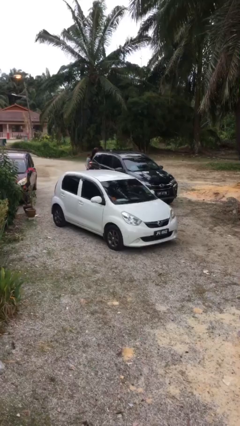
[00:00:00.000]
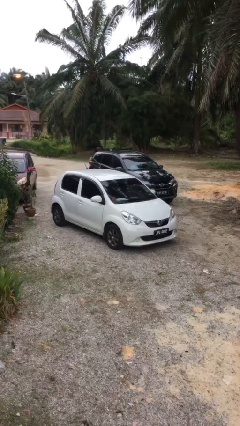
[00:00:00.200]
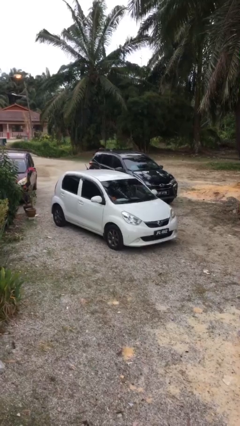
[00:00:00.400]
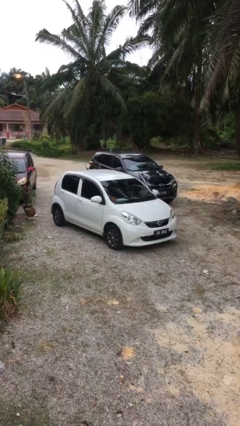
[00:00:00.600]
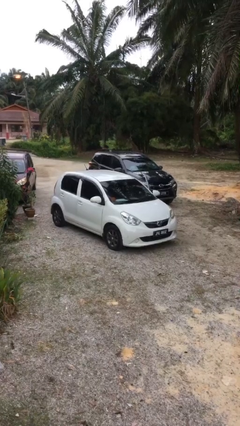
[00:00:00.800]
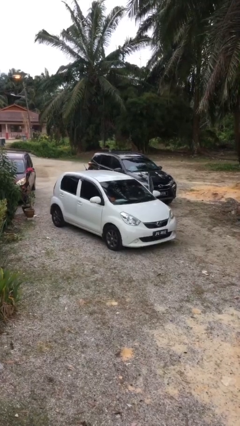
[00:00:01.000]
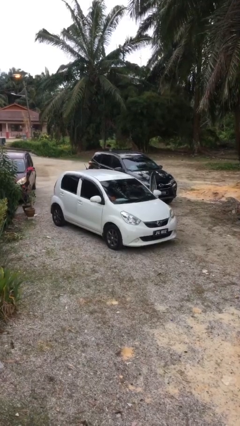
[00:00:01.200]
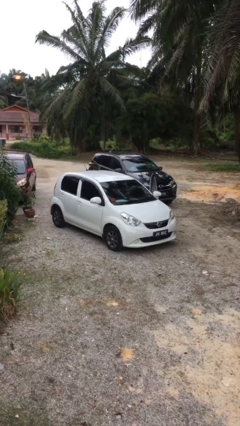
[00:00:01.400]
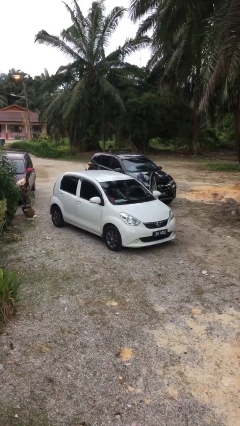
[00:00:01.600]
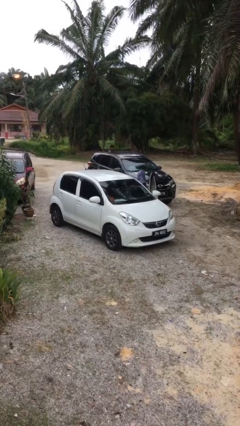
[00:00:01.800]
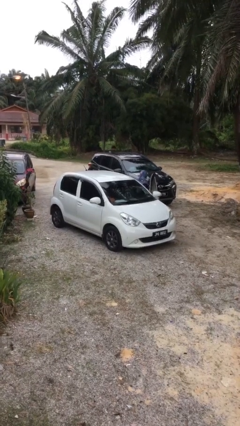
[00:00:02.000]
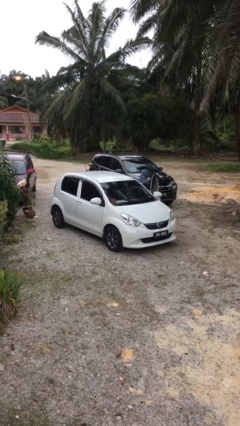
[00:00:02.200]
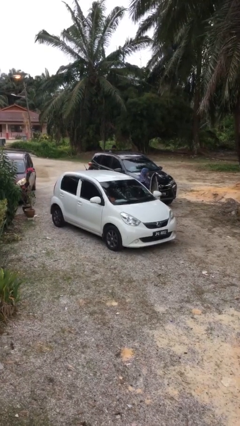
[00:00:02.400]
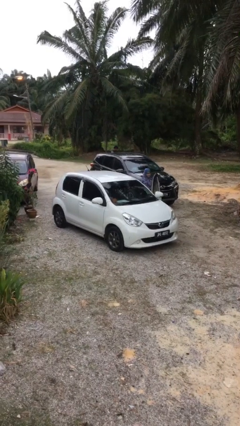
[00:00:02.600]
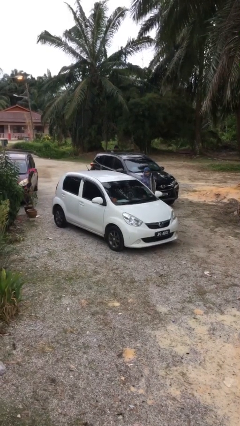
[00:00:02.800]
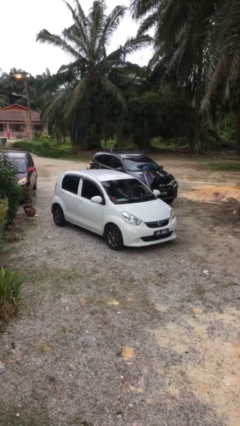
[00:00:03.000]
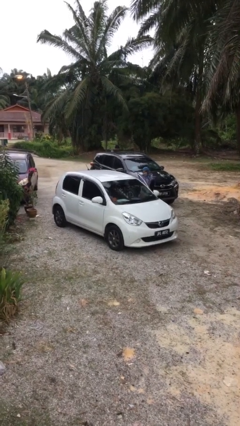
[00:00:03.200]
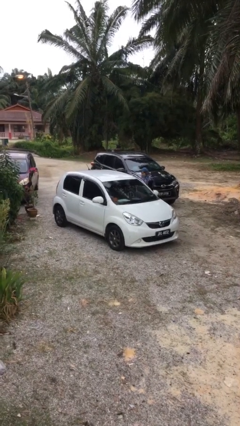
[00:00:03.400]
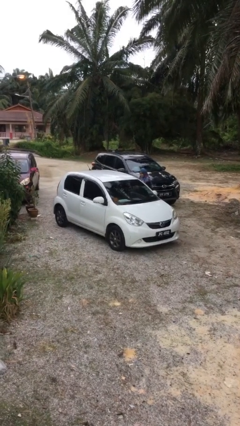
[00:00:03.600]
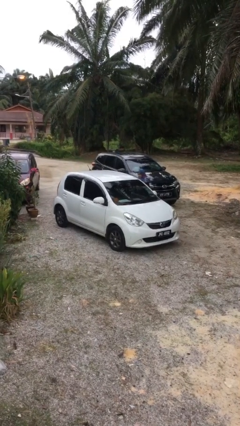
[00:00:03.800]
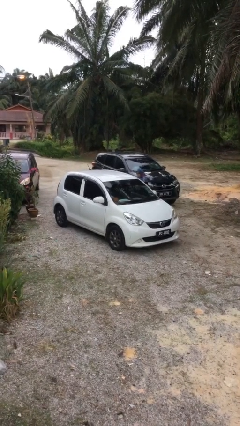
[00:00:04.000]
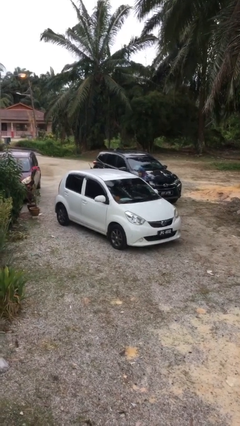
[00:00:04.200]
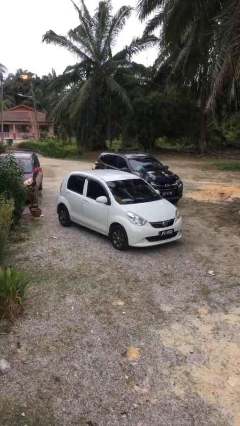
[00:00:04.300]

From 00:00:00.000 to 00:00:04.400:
car drops off person

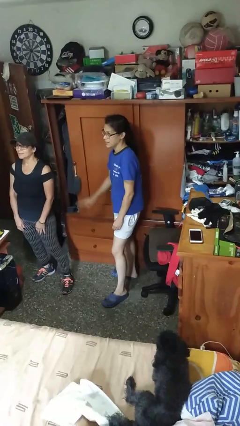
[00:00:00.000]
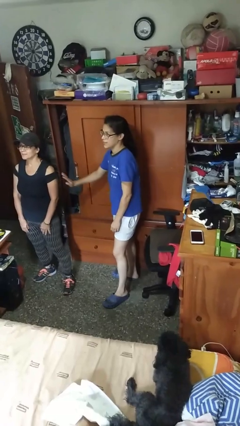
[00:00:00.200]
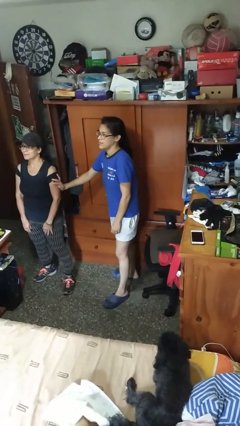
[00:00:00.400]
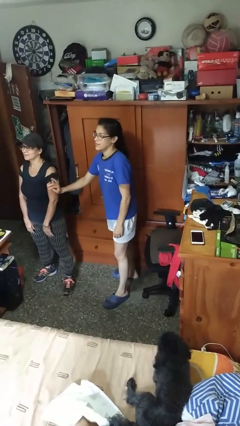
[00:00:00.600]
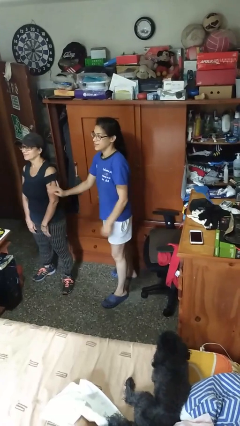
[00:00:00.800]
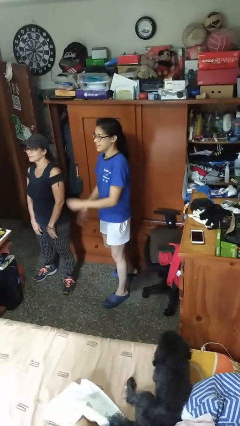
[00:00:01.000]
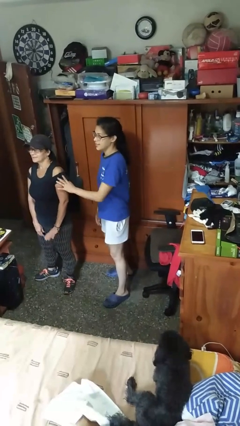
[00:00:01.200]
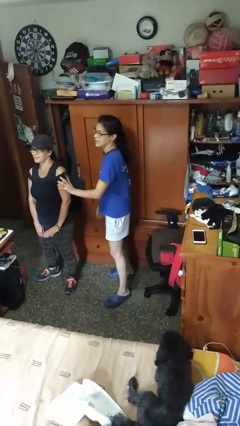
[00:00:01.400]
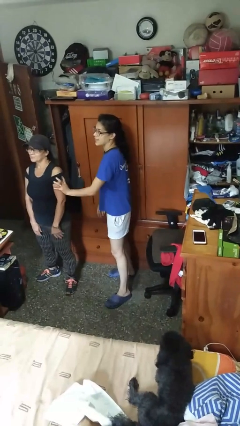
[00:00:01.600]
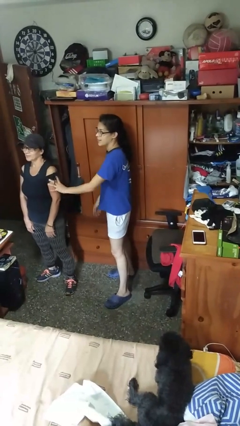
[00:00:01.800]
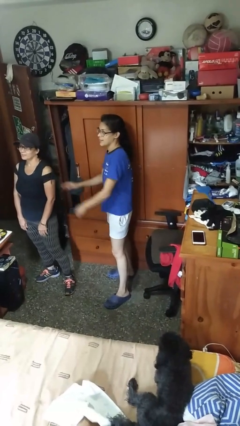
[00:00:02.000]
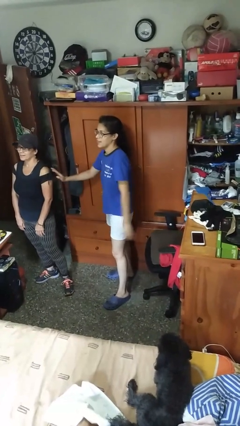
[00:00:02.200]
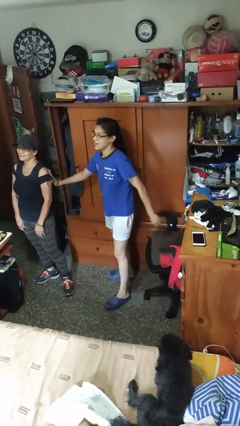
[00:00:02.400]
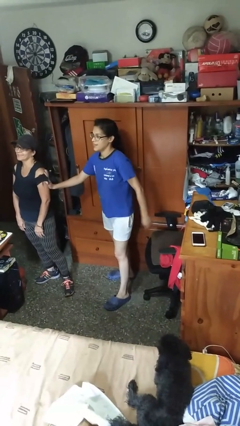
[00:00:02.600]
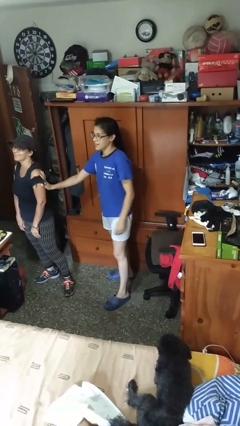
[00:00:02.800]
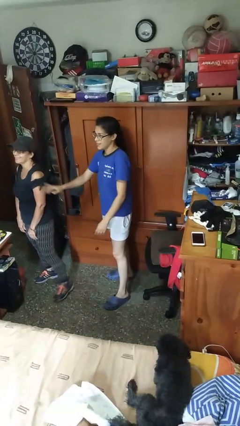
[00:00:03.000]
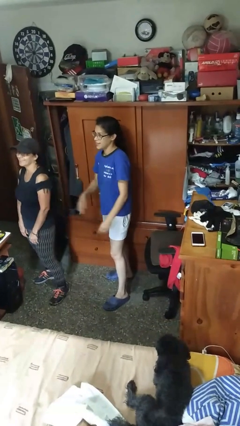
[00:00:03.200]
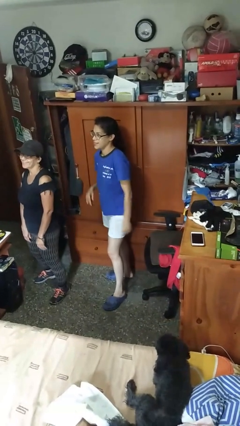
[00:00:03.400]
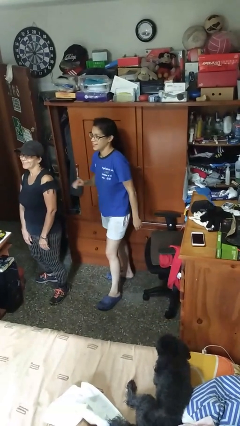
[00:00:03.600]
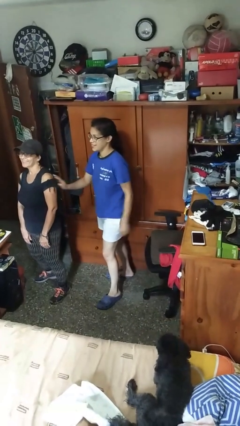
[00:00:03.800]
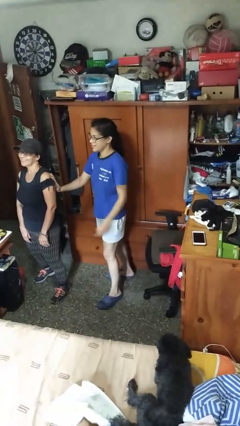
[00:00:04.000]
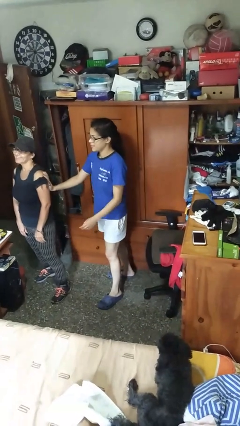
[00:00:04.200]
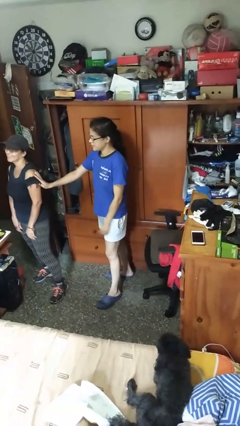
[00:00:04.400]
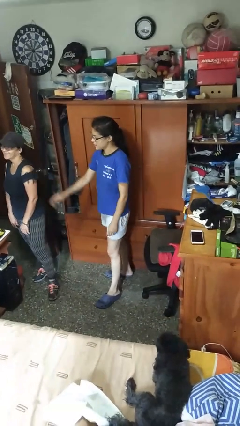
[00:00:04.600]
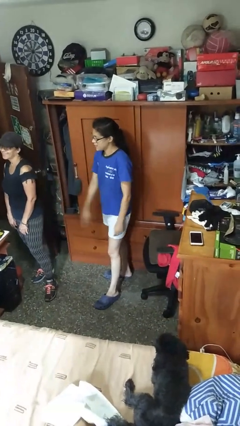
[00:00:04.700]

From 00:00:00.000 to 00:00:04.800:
person shoves person

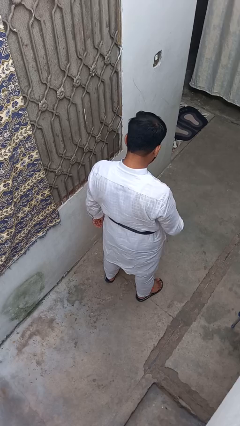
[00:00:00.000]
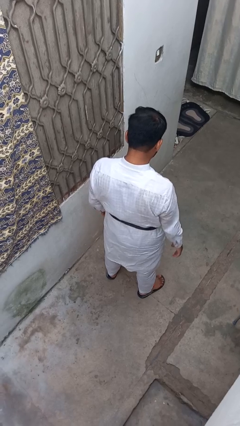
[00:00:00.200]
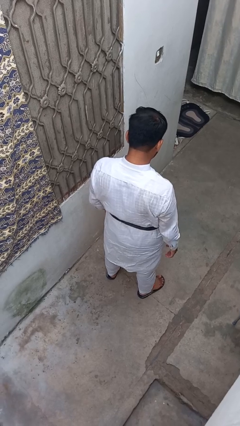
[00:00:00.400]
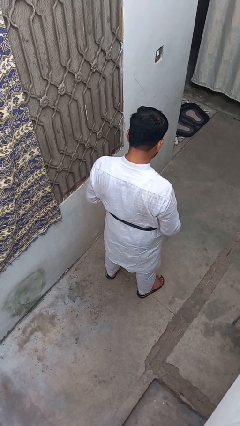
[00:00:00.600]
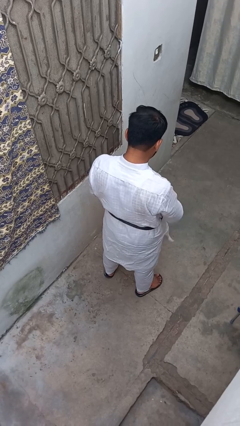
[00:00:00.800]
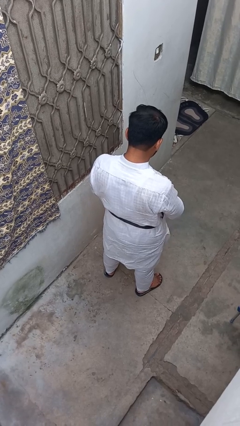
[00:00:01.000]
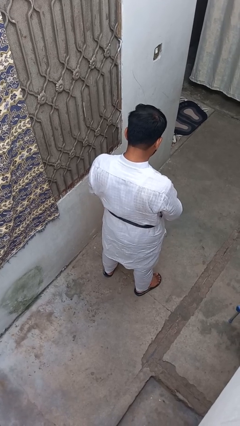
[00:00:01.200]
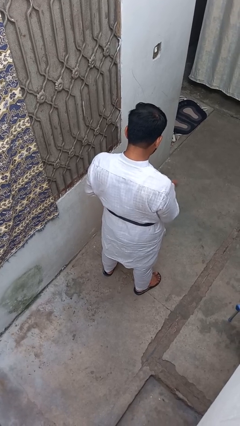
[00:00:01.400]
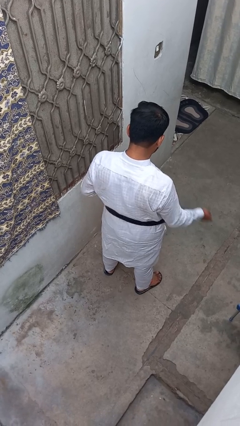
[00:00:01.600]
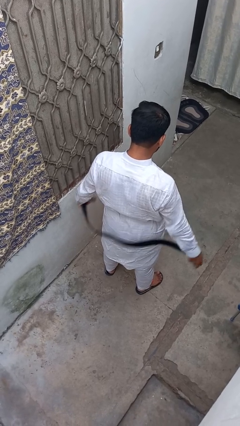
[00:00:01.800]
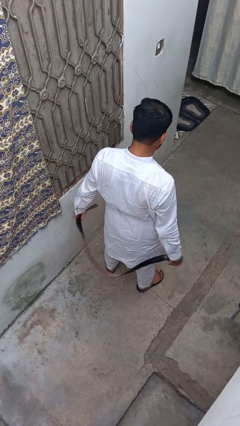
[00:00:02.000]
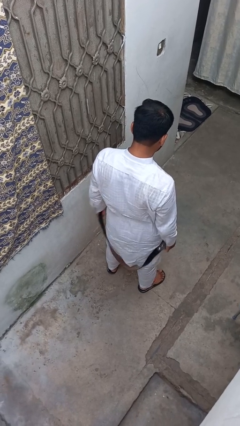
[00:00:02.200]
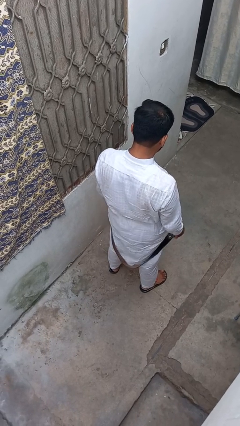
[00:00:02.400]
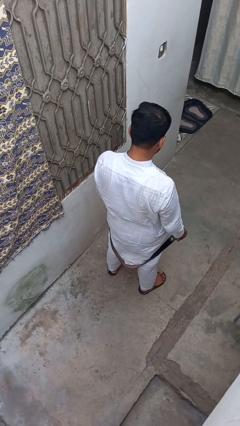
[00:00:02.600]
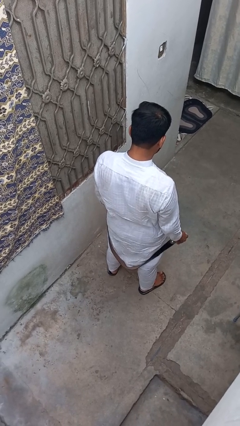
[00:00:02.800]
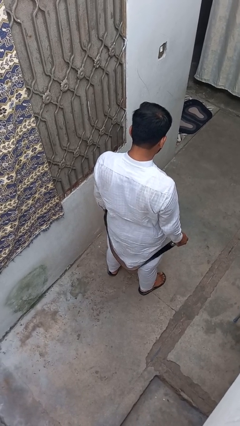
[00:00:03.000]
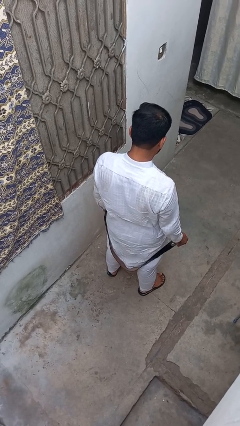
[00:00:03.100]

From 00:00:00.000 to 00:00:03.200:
person takes off belt

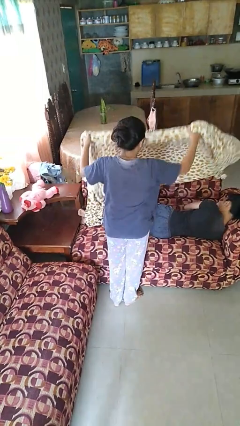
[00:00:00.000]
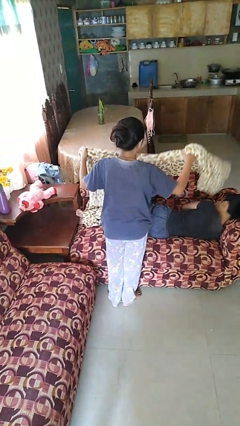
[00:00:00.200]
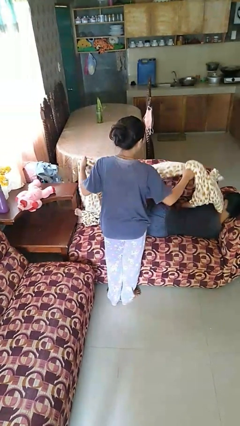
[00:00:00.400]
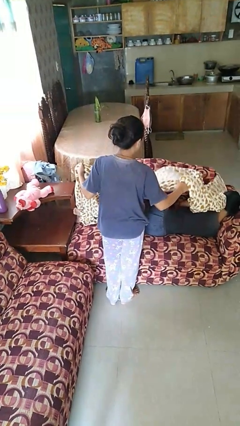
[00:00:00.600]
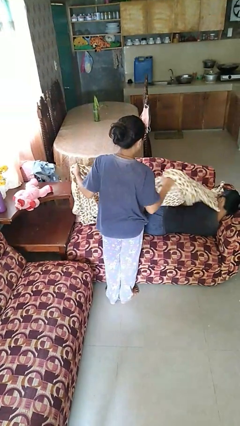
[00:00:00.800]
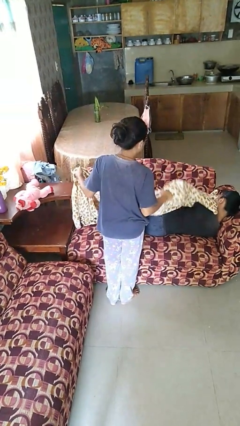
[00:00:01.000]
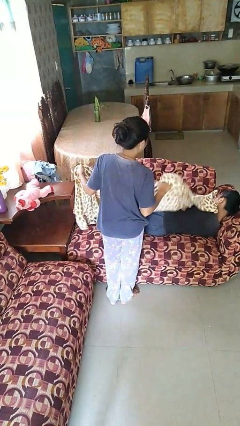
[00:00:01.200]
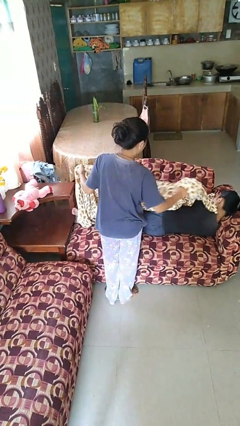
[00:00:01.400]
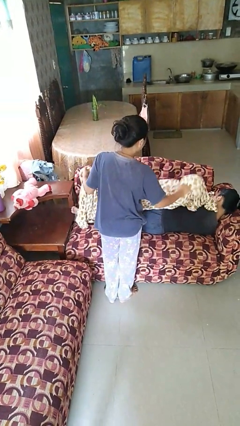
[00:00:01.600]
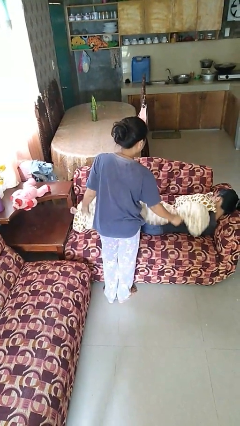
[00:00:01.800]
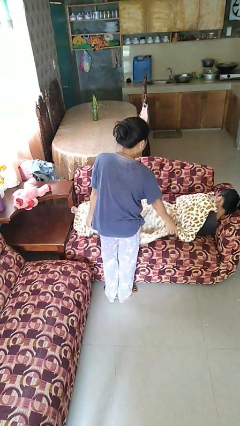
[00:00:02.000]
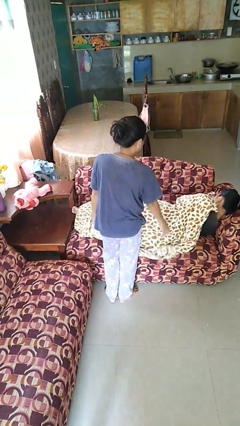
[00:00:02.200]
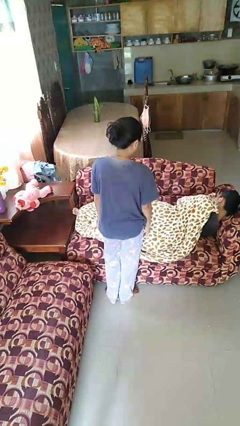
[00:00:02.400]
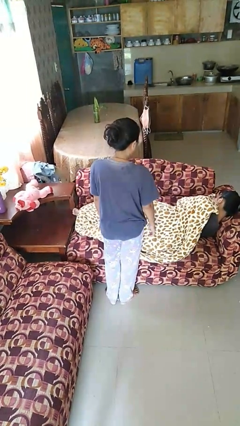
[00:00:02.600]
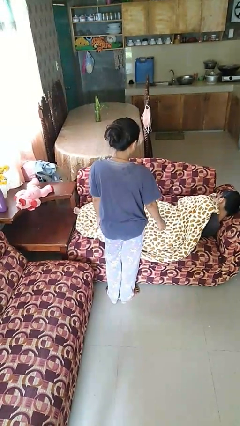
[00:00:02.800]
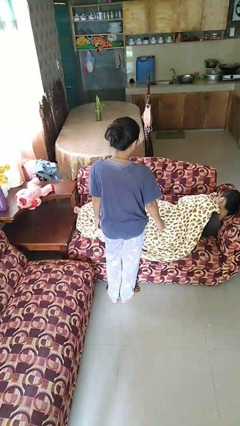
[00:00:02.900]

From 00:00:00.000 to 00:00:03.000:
person covers friend with blanket

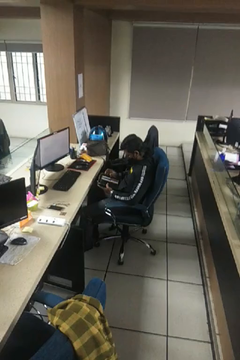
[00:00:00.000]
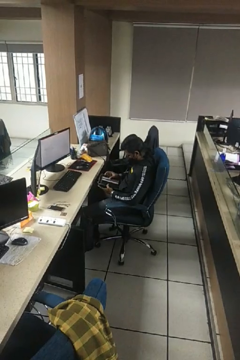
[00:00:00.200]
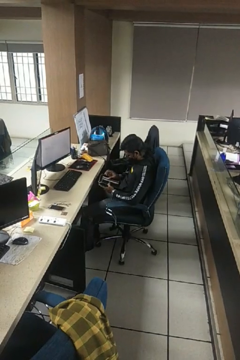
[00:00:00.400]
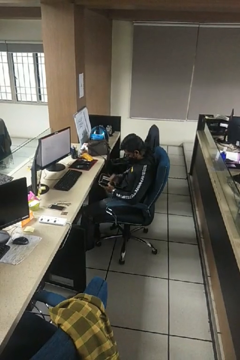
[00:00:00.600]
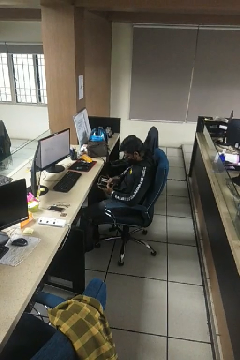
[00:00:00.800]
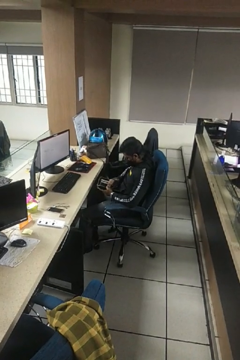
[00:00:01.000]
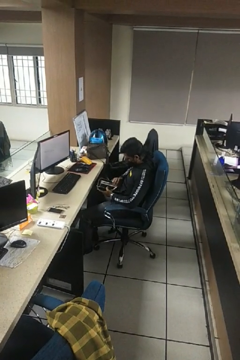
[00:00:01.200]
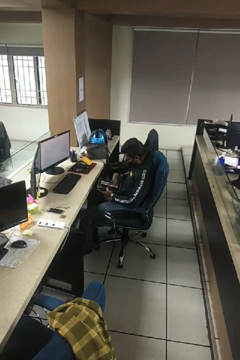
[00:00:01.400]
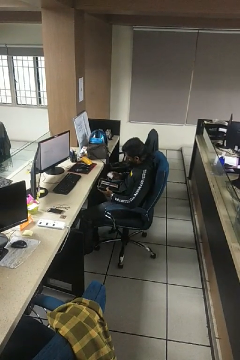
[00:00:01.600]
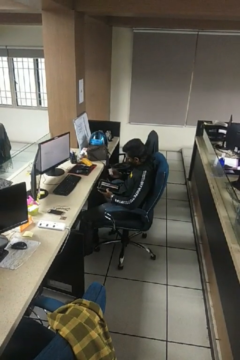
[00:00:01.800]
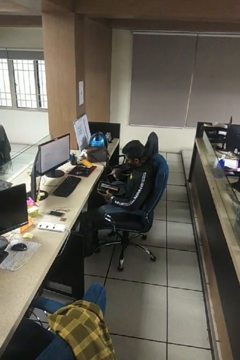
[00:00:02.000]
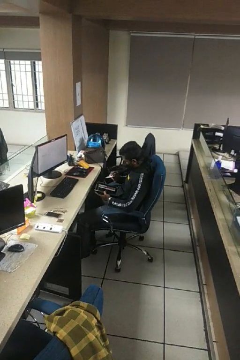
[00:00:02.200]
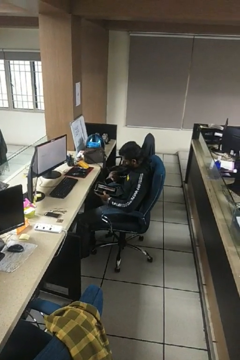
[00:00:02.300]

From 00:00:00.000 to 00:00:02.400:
person takes object from purse
